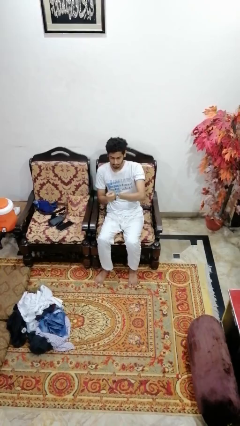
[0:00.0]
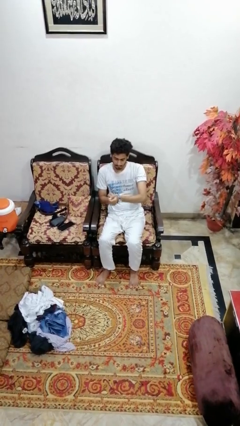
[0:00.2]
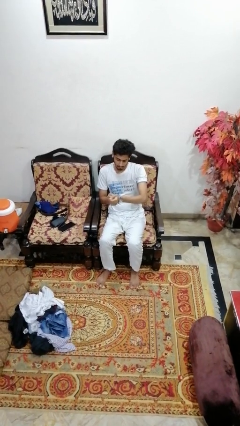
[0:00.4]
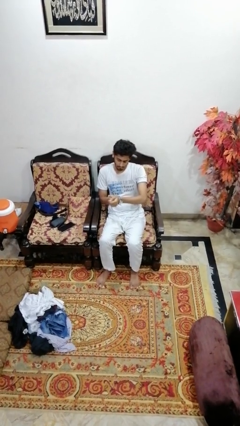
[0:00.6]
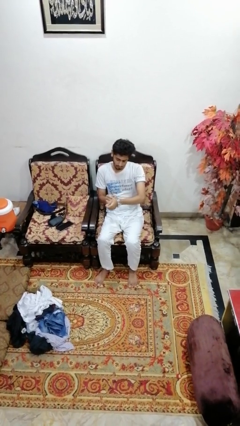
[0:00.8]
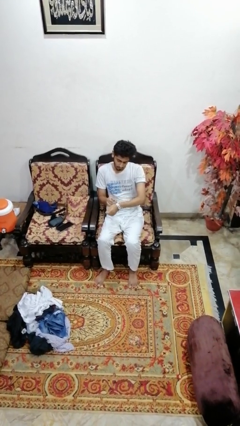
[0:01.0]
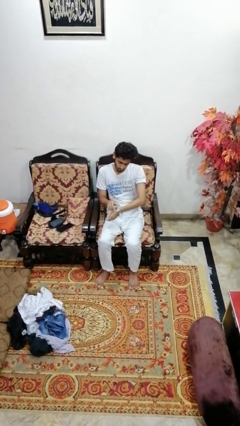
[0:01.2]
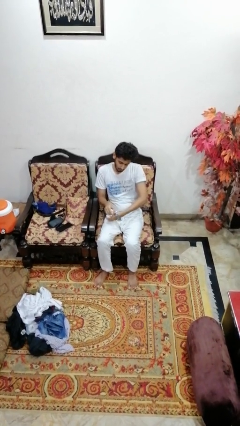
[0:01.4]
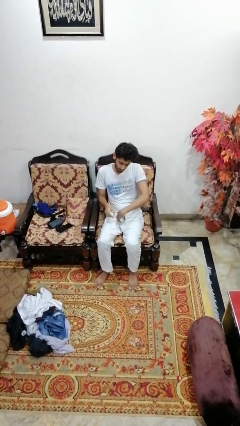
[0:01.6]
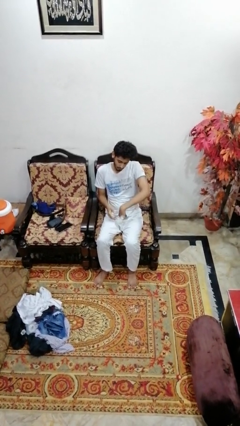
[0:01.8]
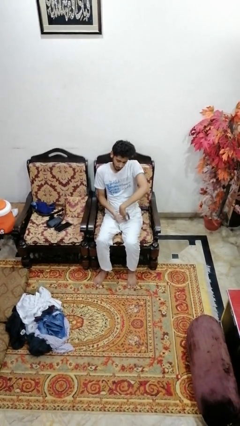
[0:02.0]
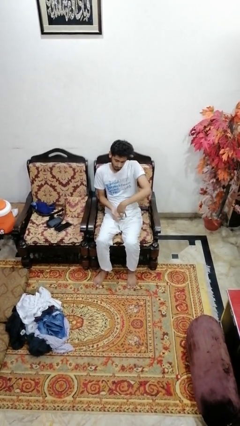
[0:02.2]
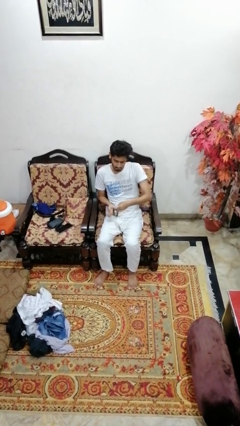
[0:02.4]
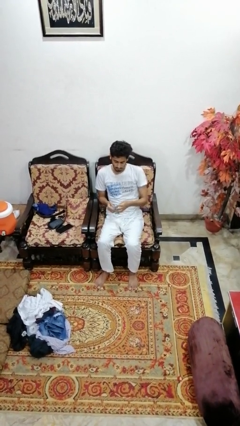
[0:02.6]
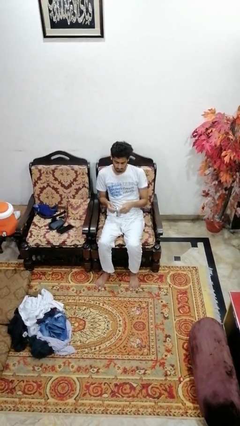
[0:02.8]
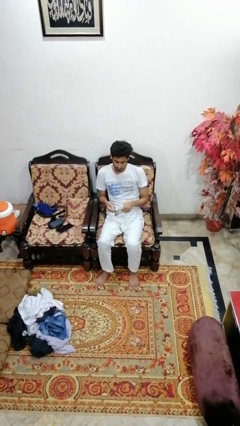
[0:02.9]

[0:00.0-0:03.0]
person takes off wristwatch

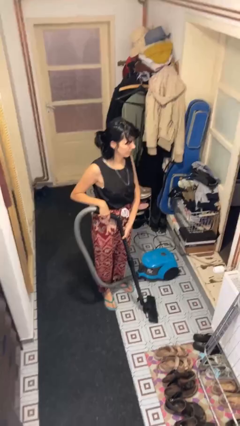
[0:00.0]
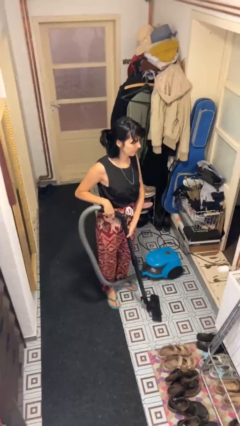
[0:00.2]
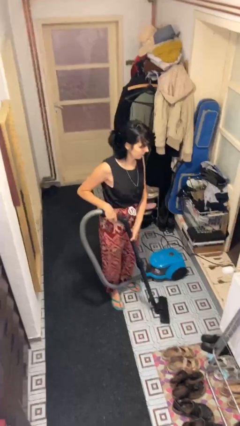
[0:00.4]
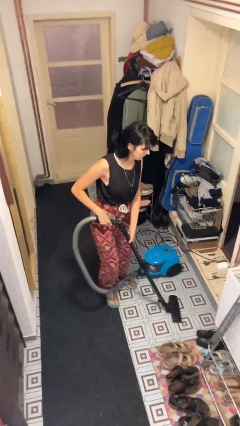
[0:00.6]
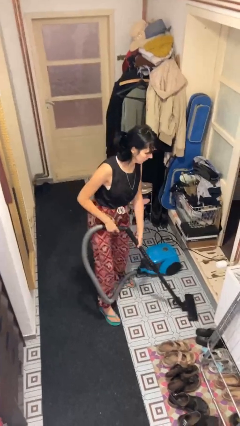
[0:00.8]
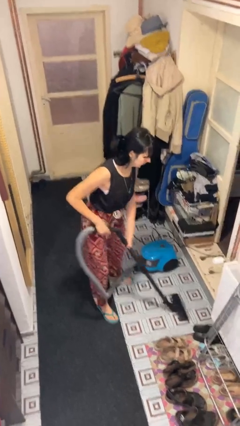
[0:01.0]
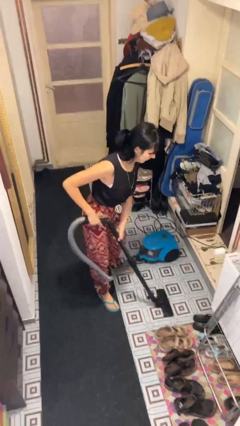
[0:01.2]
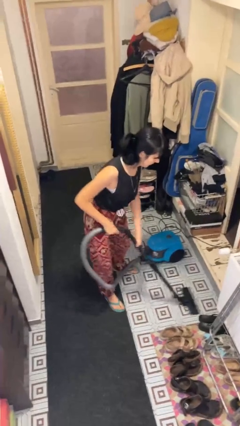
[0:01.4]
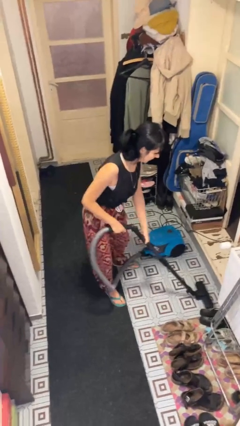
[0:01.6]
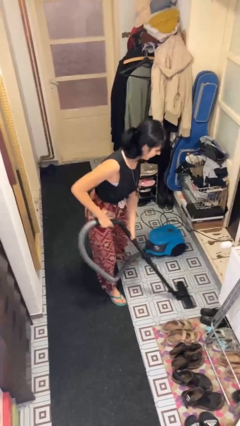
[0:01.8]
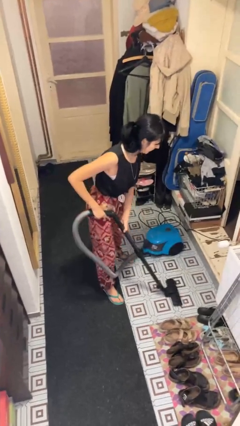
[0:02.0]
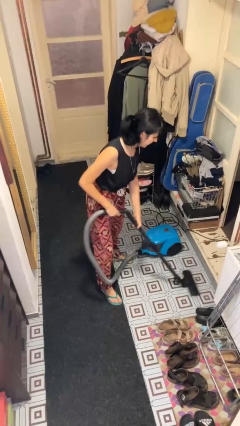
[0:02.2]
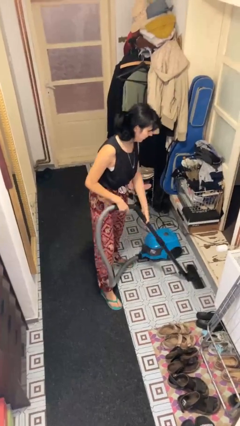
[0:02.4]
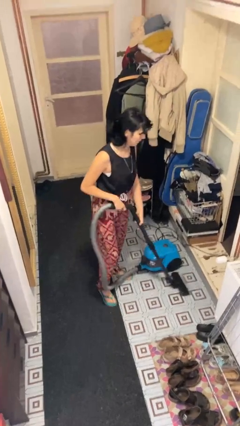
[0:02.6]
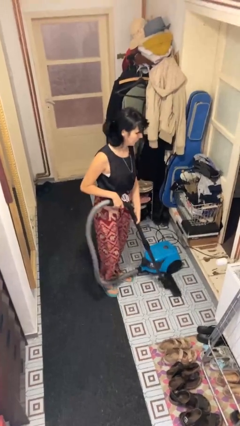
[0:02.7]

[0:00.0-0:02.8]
person vacuums carpet

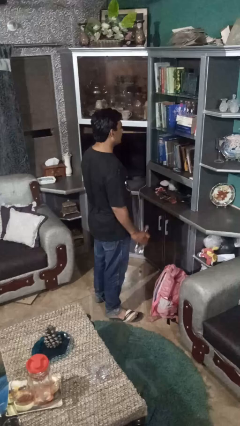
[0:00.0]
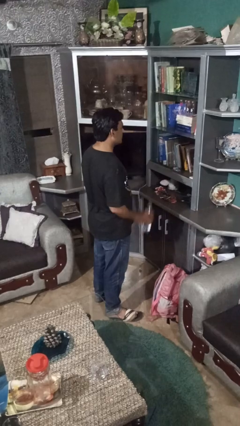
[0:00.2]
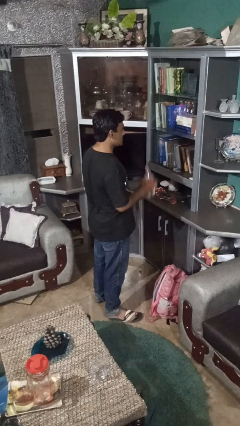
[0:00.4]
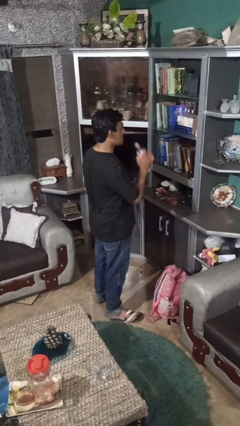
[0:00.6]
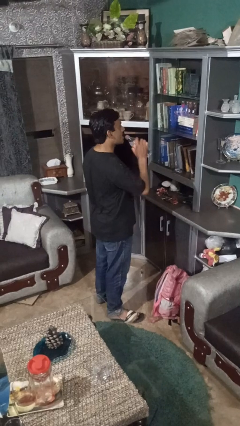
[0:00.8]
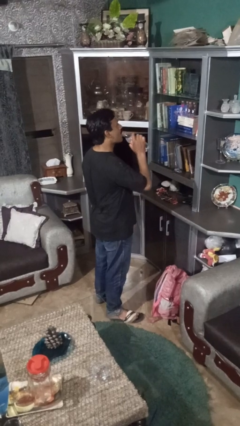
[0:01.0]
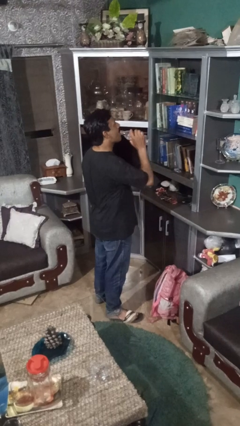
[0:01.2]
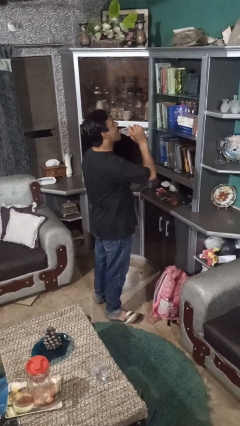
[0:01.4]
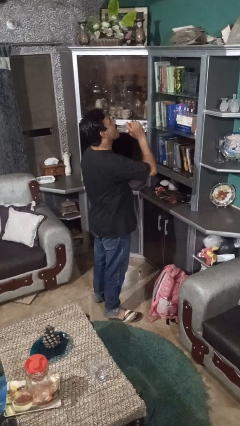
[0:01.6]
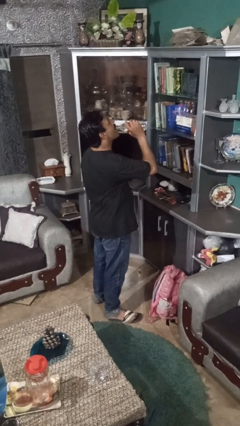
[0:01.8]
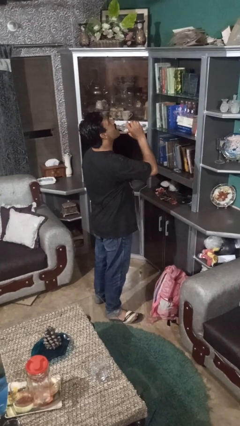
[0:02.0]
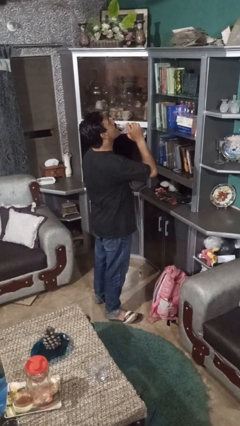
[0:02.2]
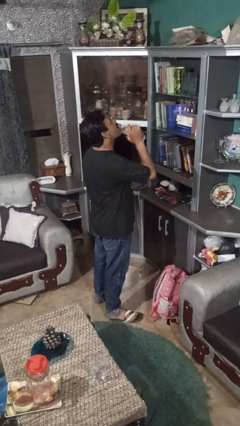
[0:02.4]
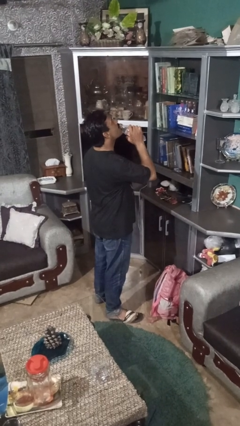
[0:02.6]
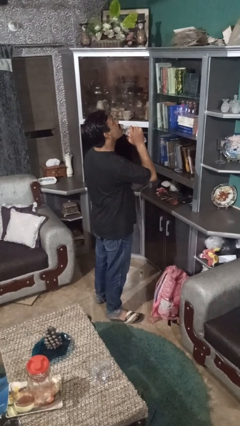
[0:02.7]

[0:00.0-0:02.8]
person drinks from bottle

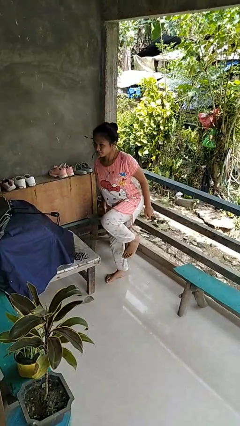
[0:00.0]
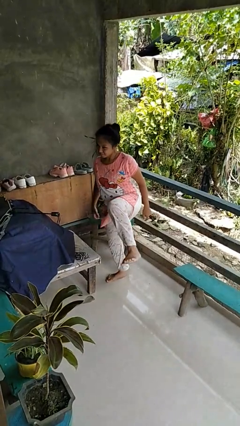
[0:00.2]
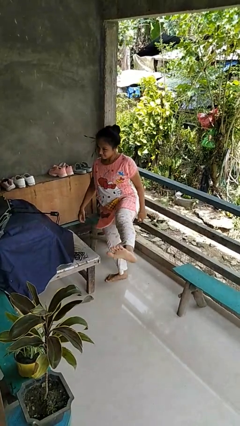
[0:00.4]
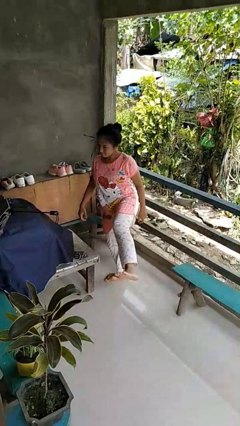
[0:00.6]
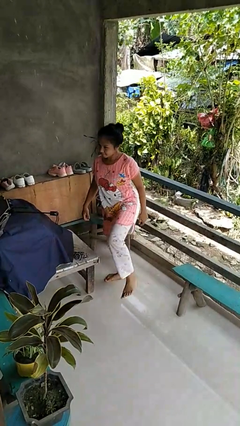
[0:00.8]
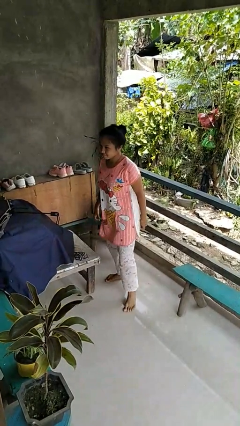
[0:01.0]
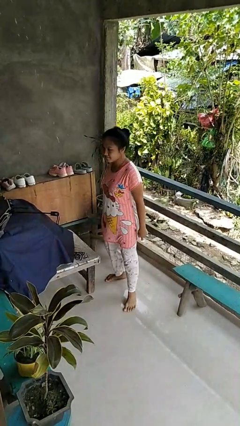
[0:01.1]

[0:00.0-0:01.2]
person karate kicks

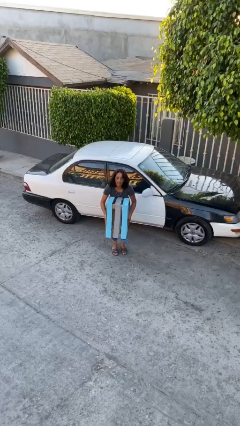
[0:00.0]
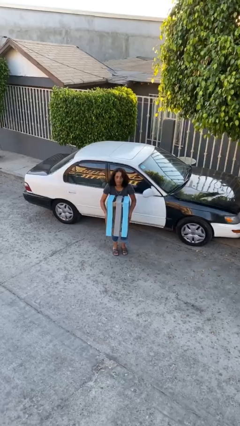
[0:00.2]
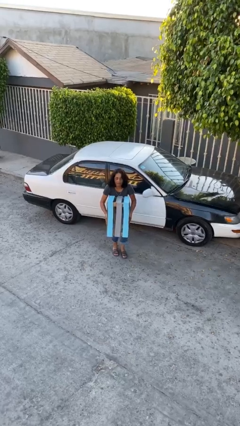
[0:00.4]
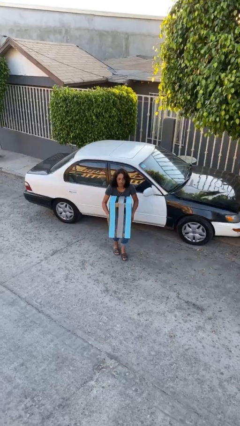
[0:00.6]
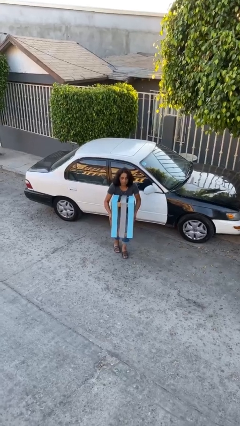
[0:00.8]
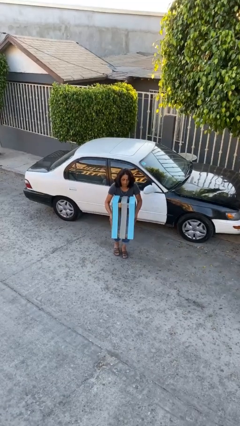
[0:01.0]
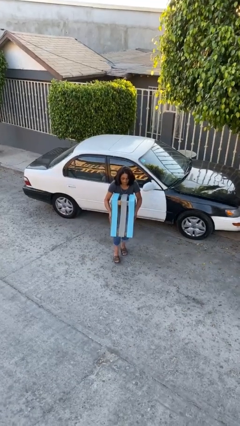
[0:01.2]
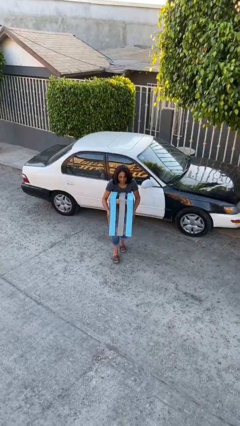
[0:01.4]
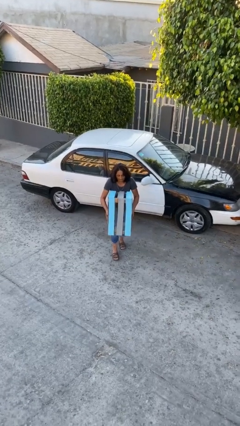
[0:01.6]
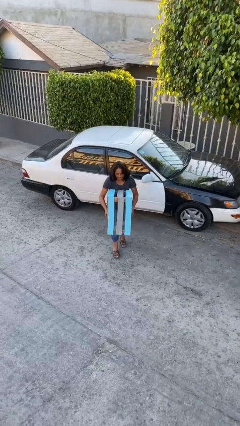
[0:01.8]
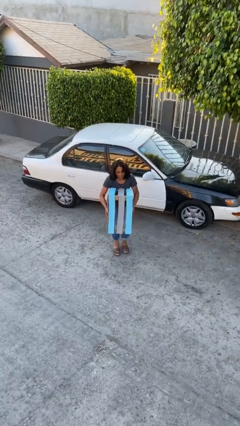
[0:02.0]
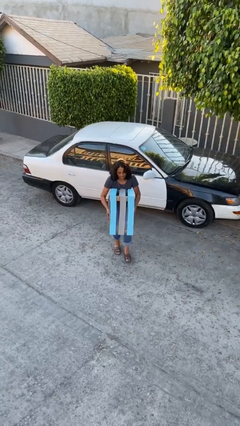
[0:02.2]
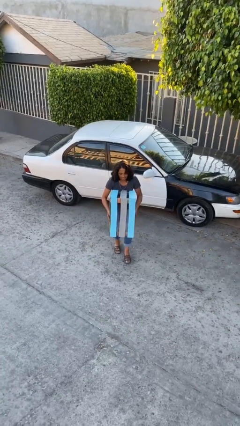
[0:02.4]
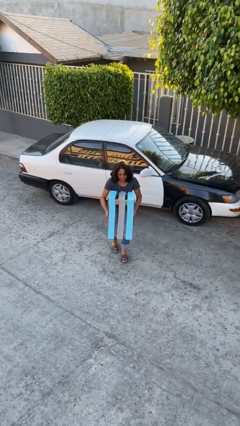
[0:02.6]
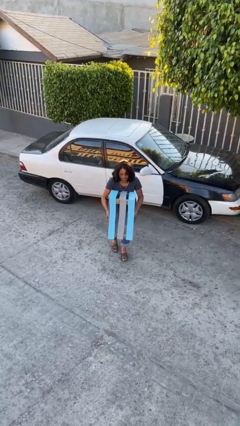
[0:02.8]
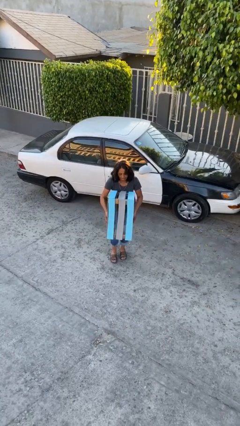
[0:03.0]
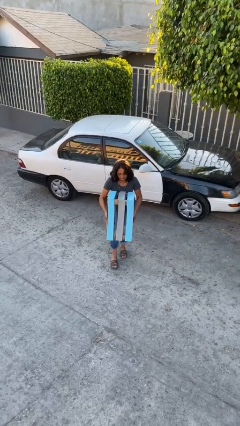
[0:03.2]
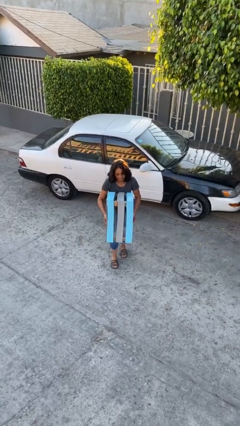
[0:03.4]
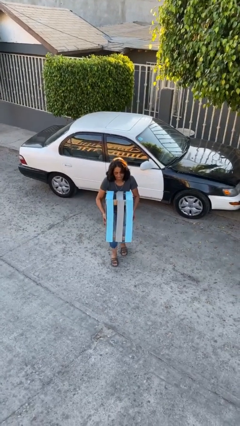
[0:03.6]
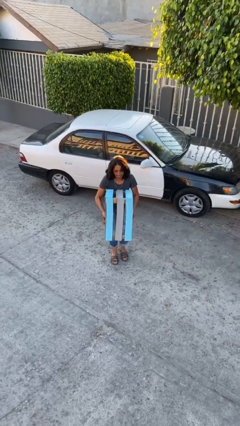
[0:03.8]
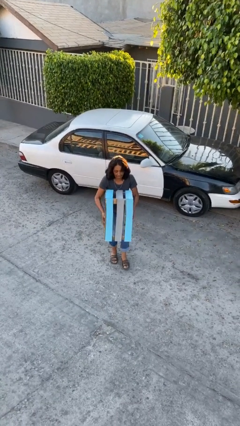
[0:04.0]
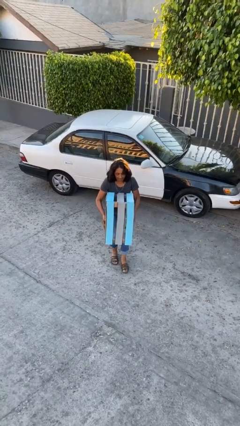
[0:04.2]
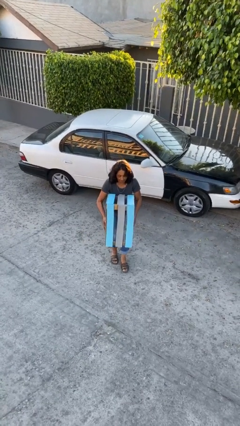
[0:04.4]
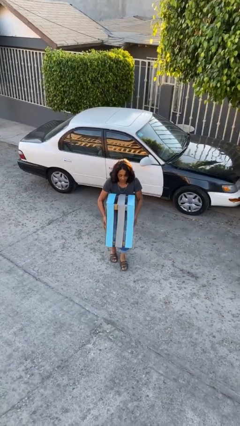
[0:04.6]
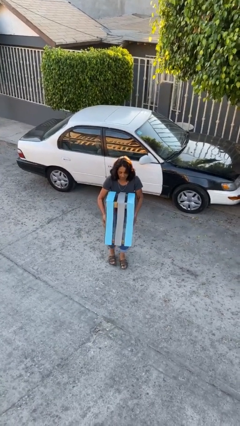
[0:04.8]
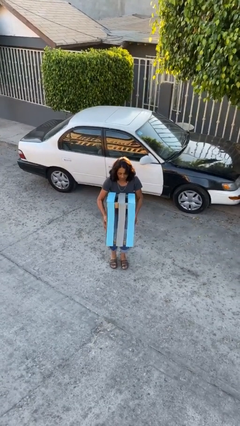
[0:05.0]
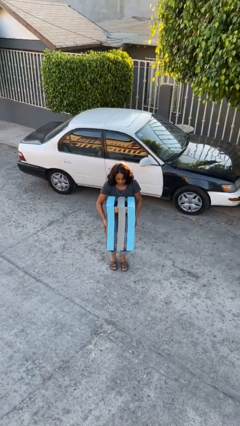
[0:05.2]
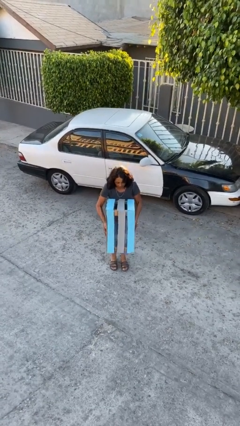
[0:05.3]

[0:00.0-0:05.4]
person carries heavy object

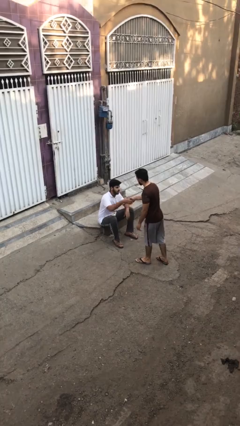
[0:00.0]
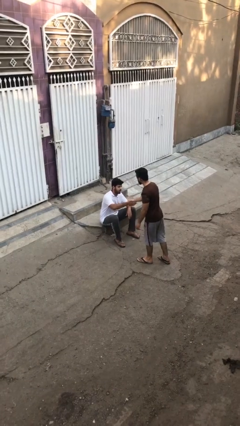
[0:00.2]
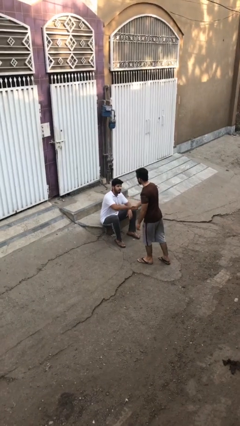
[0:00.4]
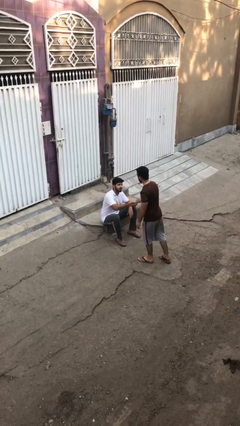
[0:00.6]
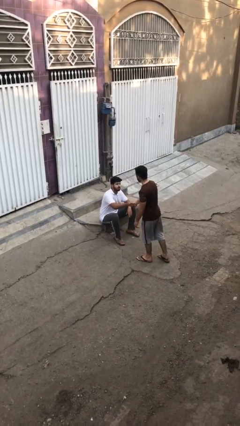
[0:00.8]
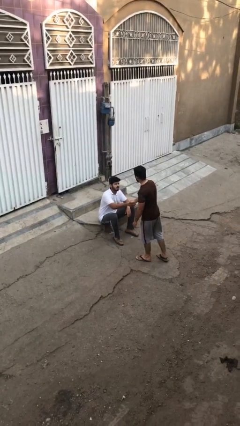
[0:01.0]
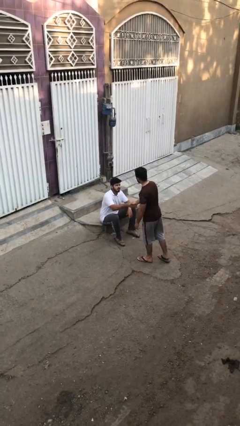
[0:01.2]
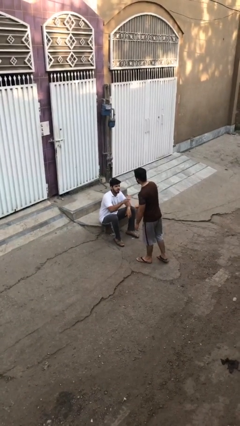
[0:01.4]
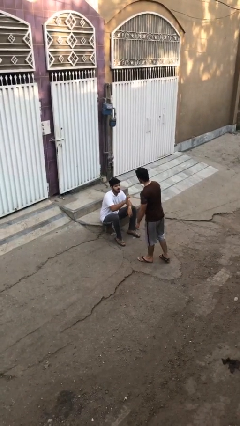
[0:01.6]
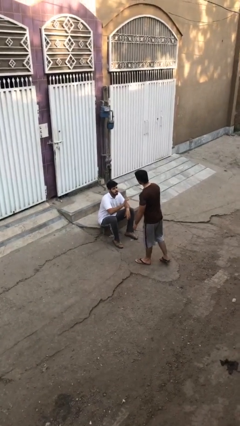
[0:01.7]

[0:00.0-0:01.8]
person shakes hand

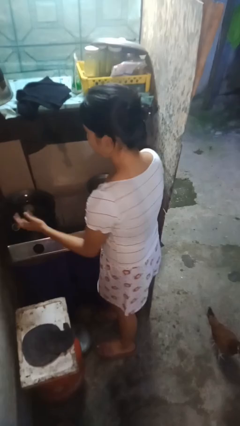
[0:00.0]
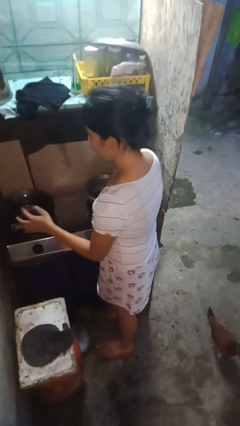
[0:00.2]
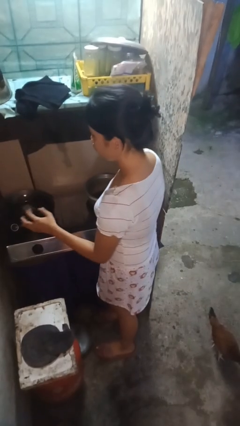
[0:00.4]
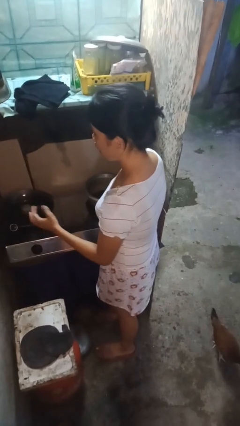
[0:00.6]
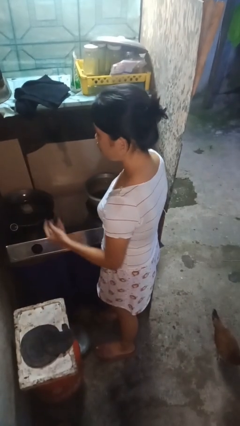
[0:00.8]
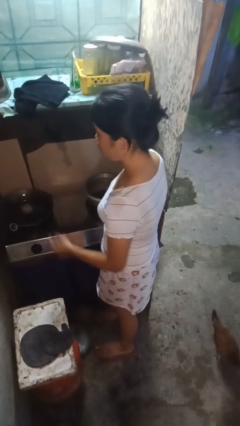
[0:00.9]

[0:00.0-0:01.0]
person burns hand
